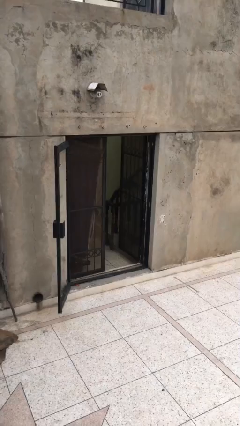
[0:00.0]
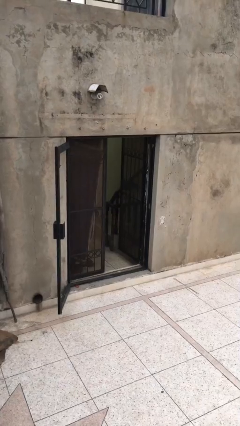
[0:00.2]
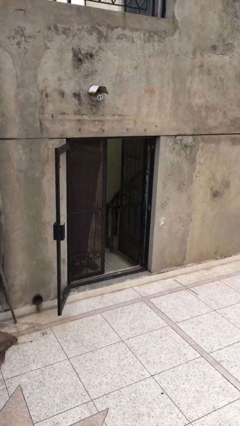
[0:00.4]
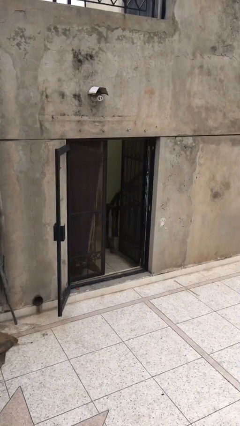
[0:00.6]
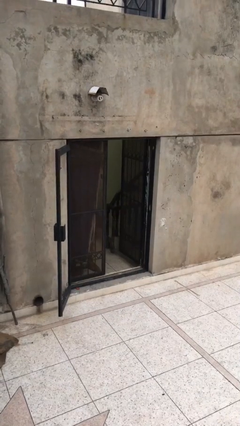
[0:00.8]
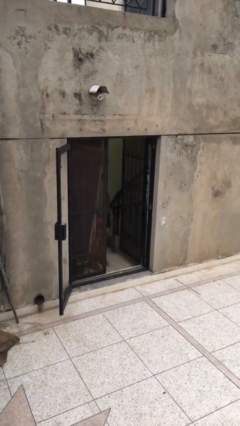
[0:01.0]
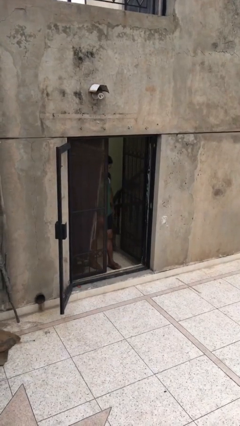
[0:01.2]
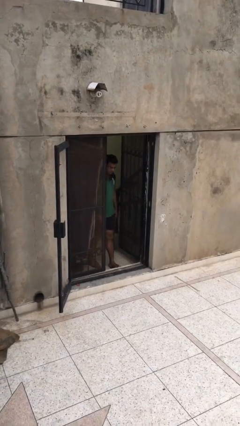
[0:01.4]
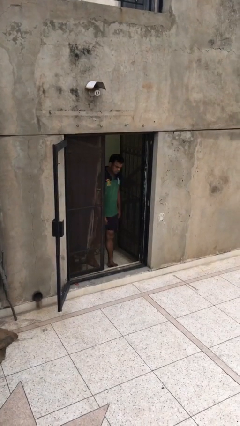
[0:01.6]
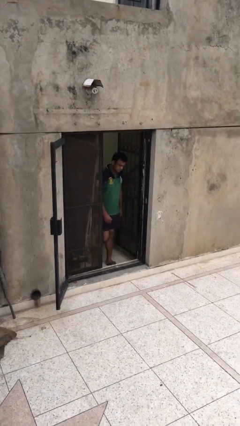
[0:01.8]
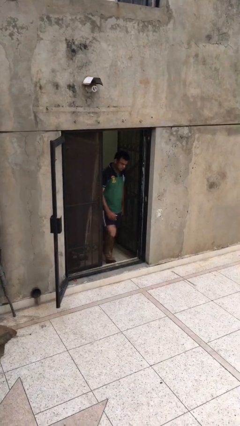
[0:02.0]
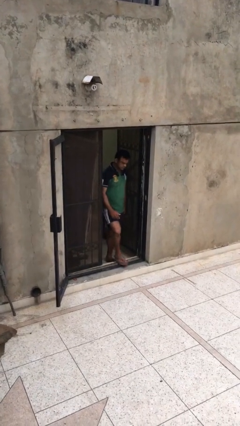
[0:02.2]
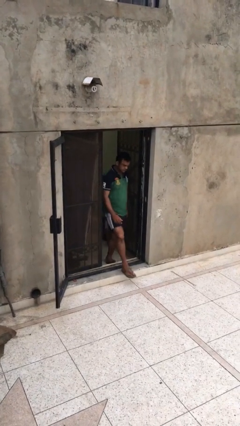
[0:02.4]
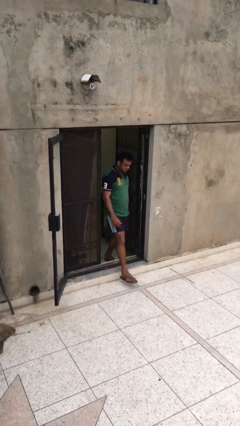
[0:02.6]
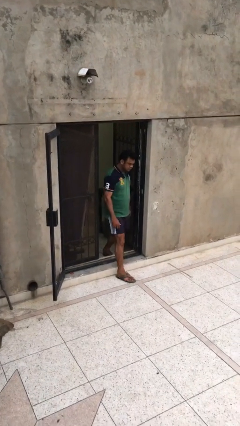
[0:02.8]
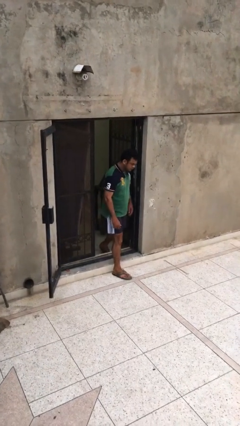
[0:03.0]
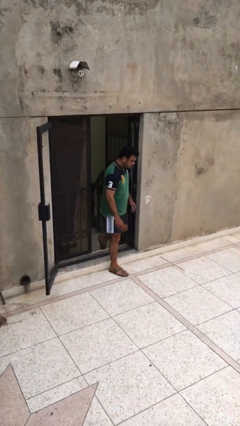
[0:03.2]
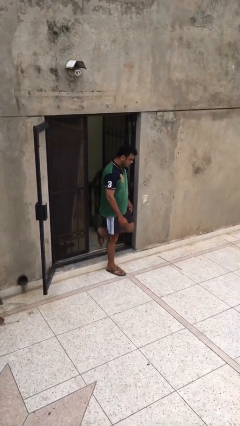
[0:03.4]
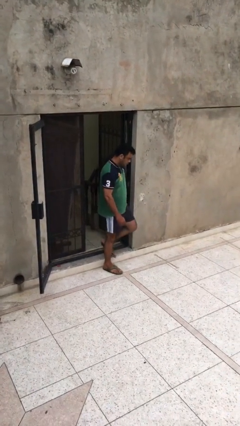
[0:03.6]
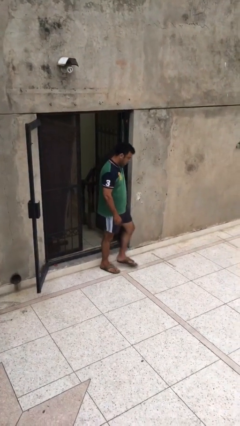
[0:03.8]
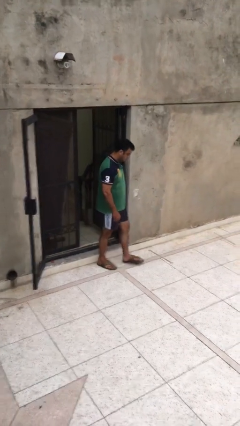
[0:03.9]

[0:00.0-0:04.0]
person enters scene through structure

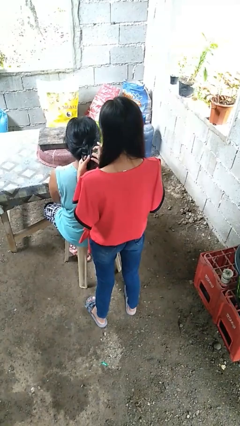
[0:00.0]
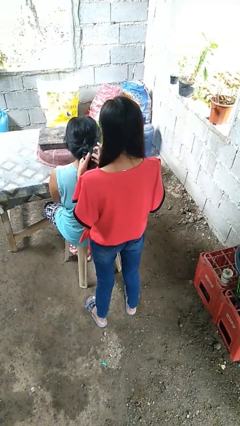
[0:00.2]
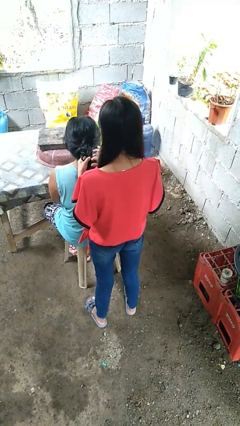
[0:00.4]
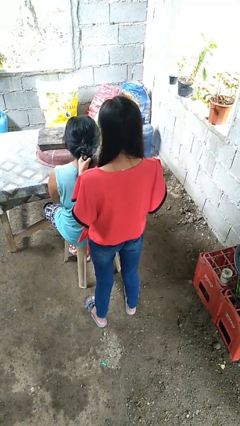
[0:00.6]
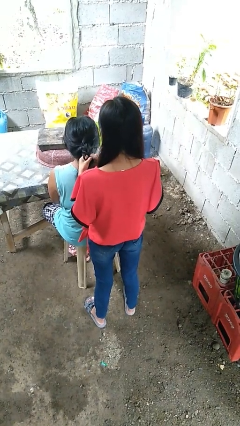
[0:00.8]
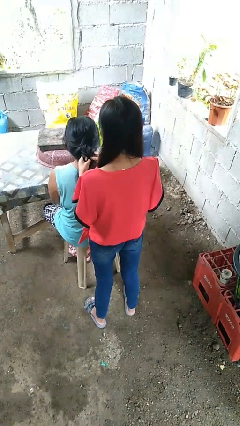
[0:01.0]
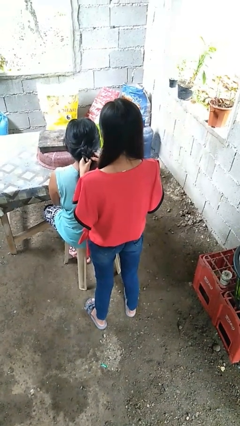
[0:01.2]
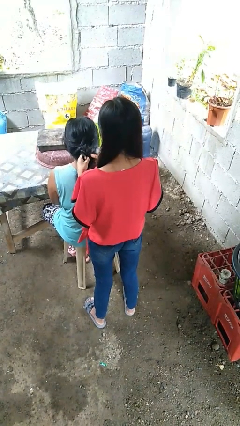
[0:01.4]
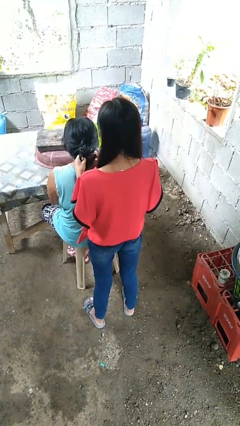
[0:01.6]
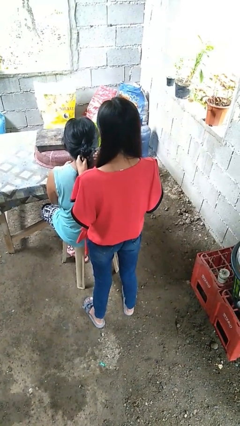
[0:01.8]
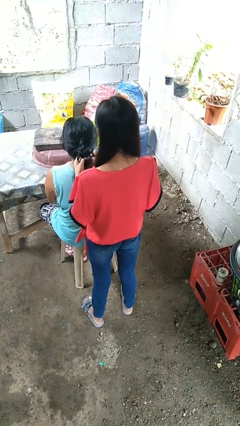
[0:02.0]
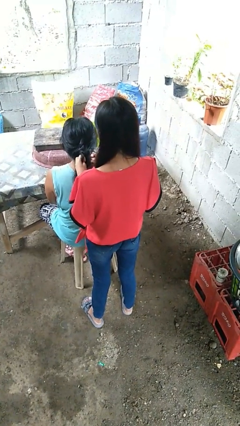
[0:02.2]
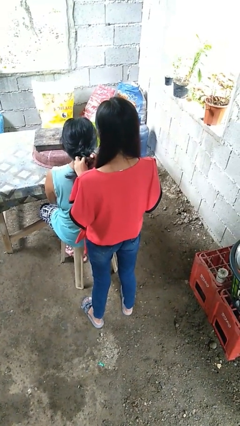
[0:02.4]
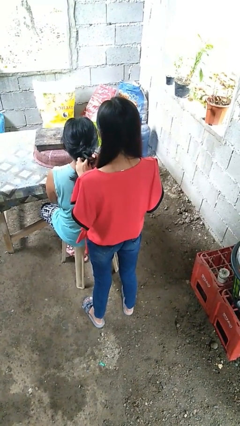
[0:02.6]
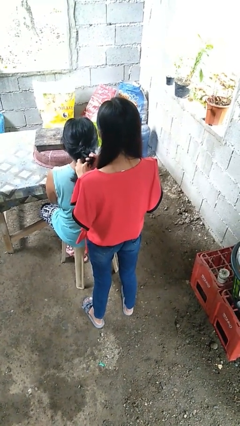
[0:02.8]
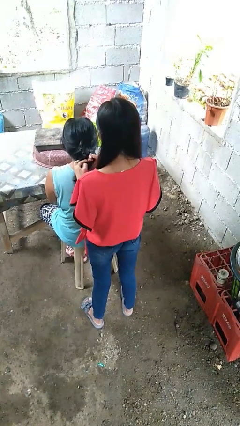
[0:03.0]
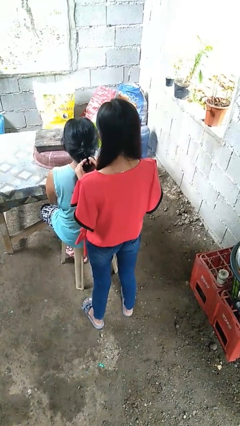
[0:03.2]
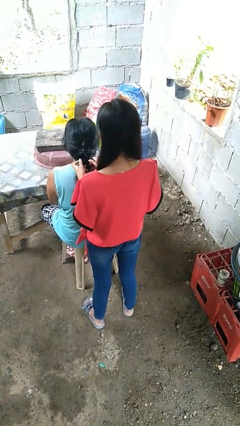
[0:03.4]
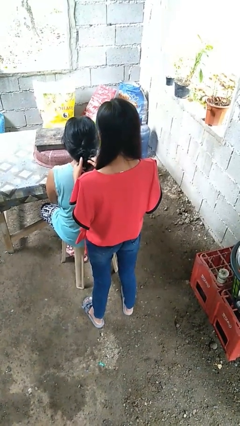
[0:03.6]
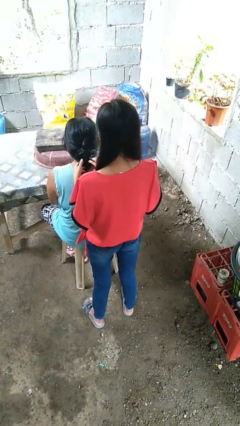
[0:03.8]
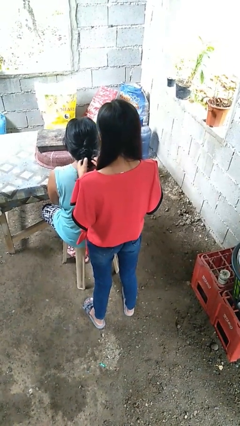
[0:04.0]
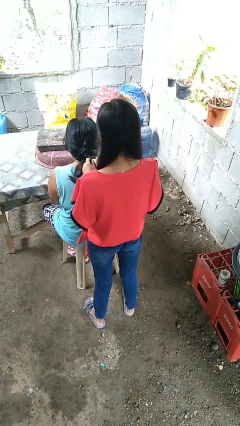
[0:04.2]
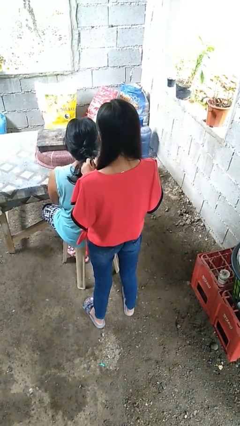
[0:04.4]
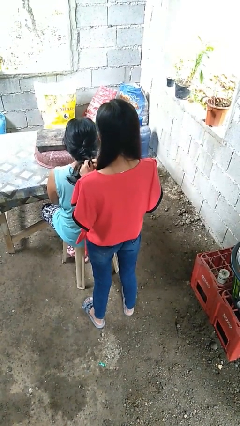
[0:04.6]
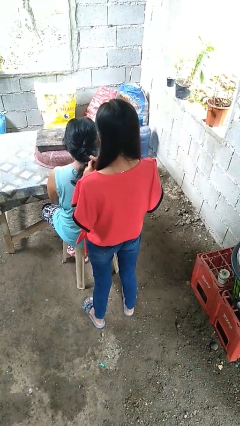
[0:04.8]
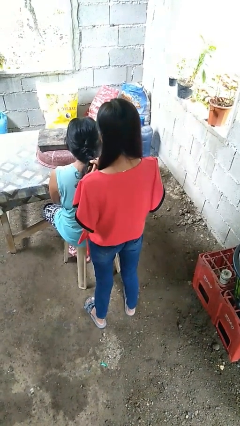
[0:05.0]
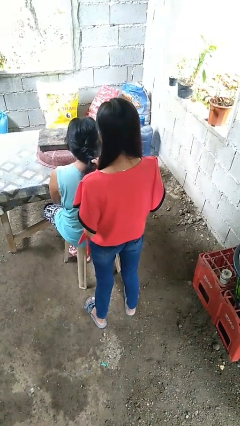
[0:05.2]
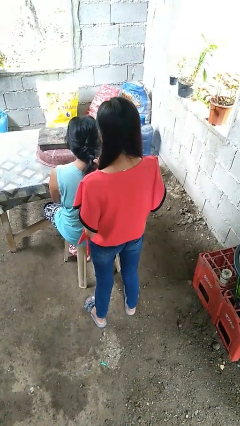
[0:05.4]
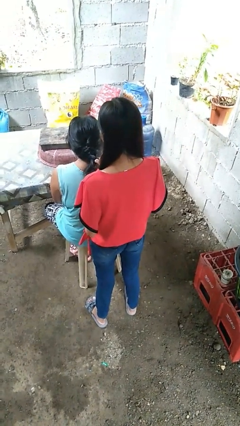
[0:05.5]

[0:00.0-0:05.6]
person braids hair of person

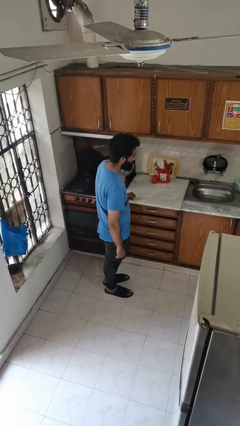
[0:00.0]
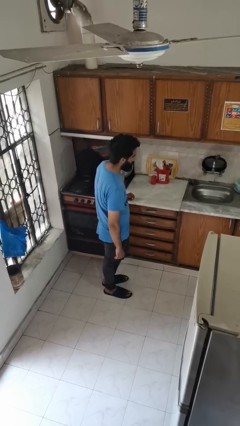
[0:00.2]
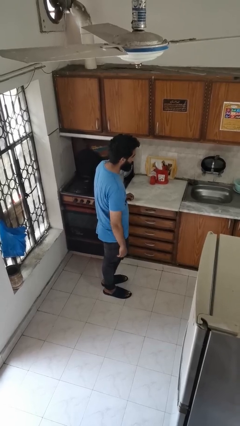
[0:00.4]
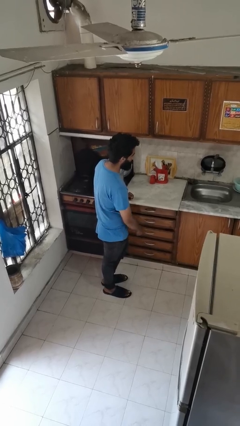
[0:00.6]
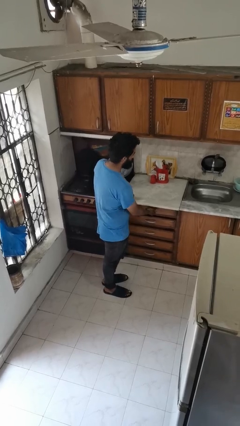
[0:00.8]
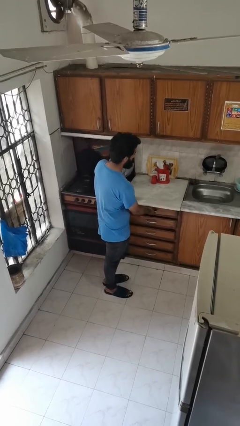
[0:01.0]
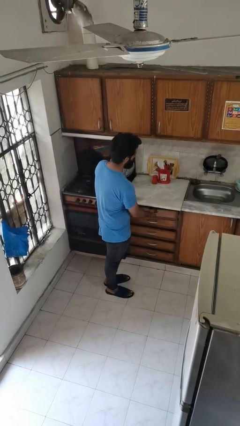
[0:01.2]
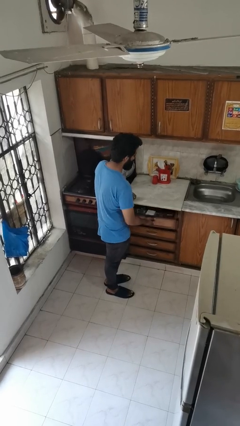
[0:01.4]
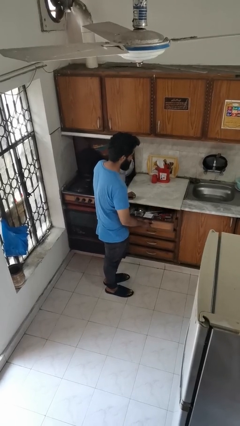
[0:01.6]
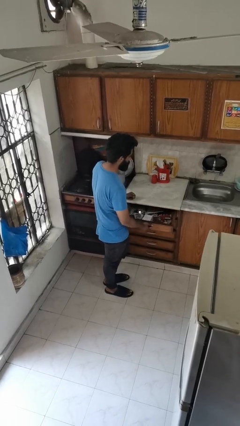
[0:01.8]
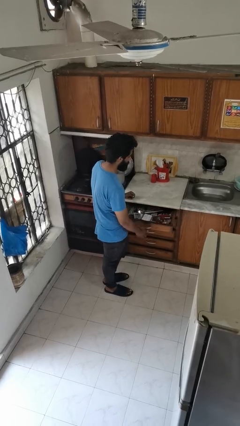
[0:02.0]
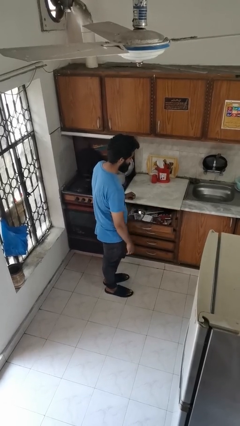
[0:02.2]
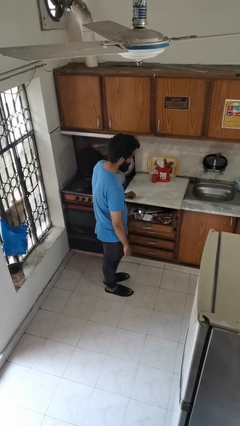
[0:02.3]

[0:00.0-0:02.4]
person opens kitchen drawer

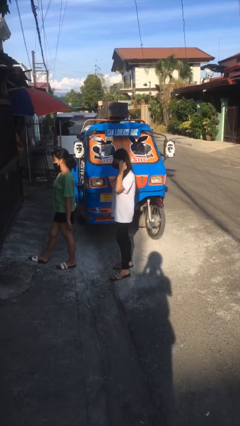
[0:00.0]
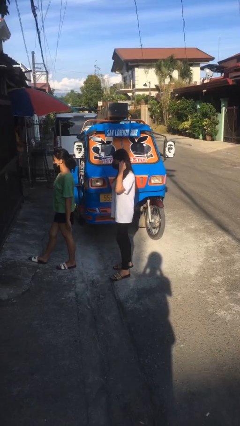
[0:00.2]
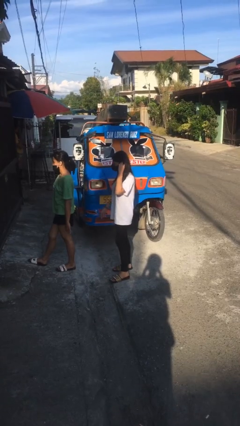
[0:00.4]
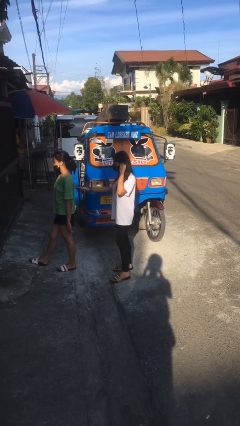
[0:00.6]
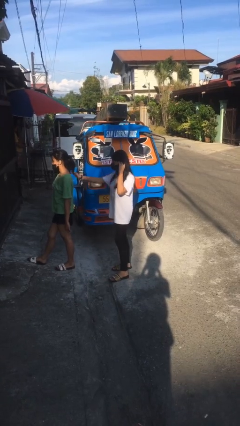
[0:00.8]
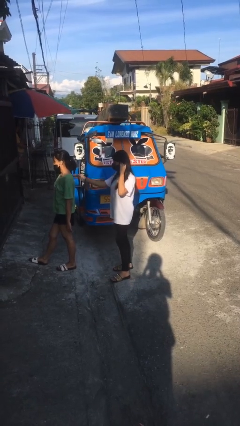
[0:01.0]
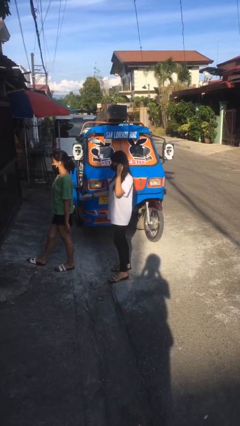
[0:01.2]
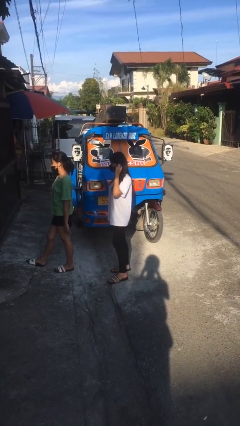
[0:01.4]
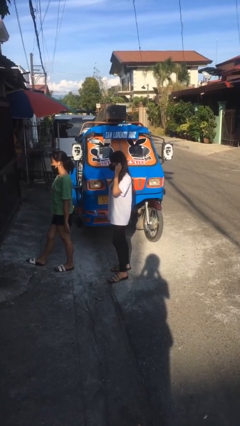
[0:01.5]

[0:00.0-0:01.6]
person touches back of person

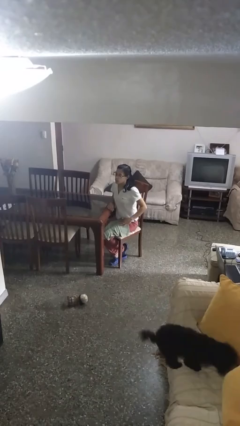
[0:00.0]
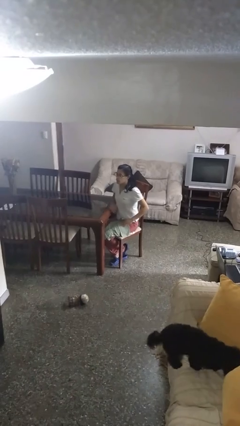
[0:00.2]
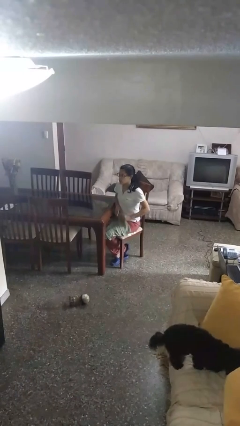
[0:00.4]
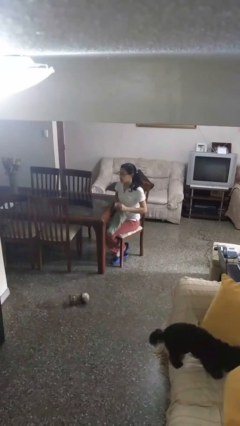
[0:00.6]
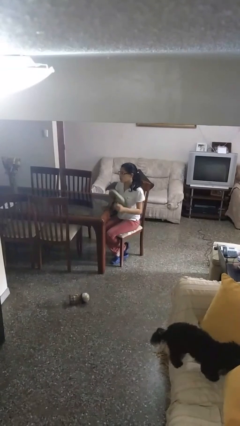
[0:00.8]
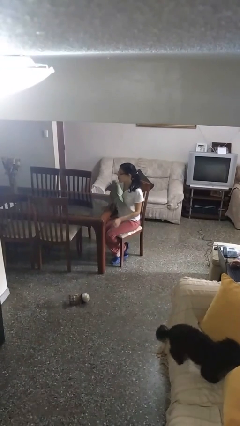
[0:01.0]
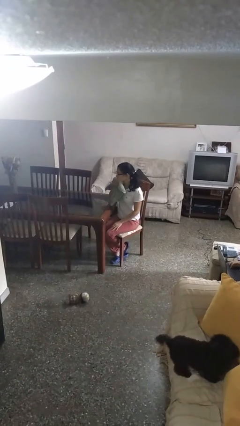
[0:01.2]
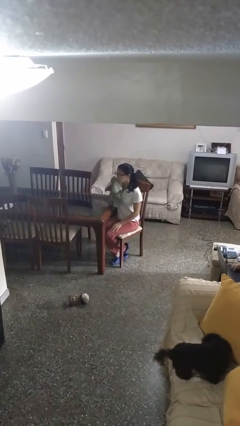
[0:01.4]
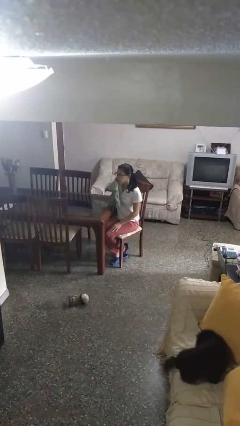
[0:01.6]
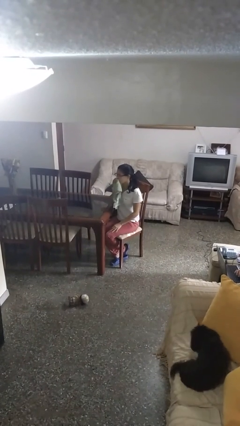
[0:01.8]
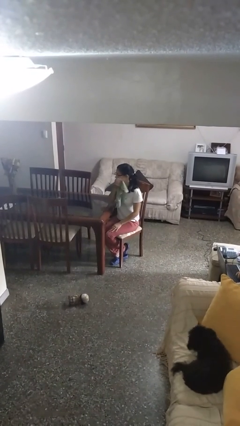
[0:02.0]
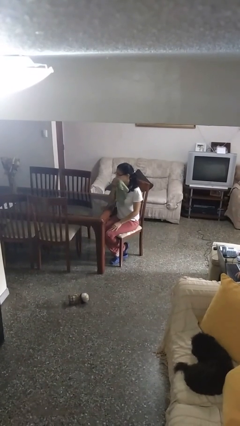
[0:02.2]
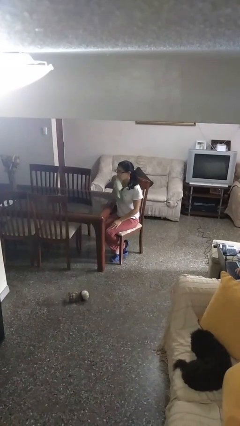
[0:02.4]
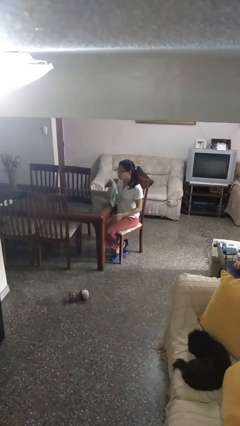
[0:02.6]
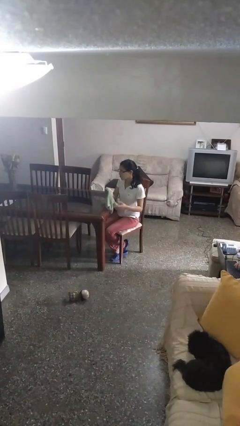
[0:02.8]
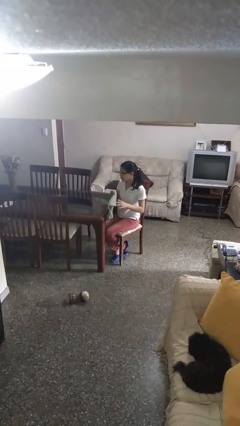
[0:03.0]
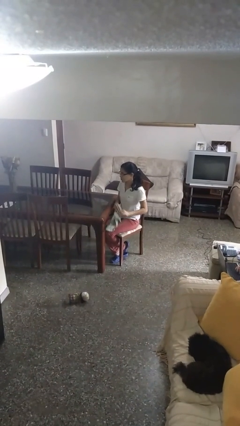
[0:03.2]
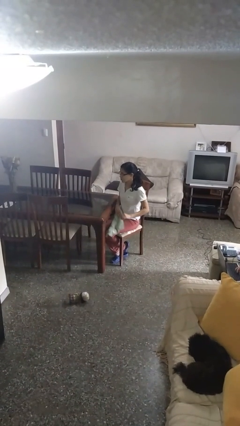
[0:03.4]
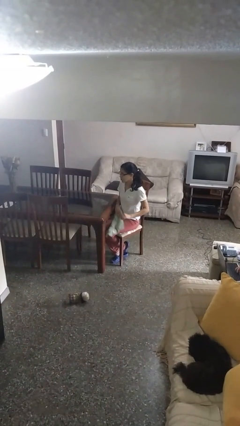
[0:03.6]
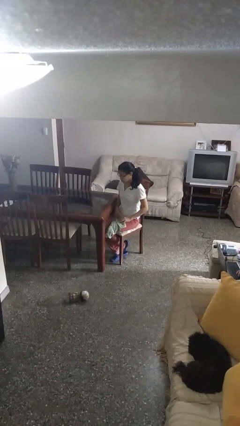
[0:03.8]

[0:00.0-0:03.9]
person wipes mouth with napkin
